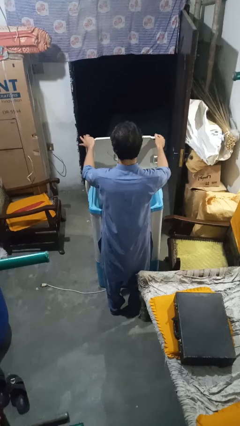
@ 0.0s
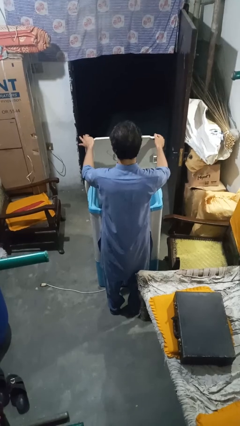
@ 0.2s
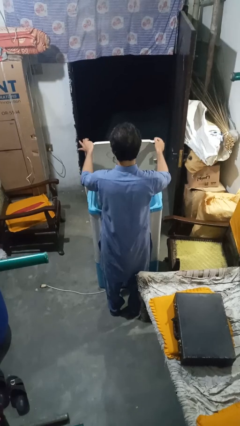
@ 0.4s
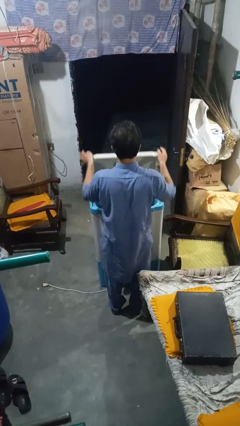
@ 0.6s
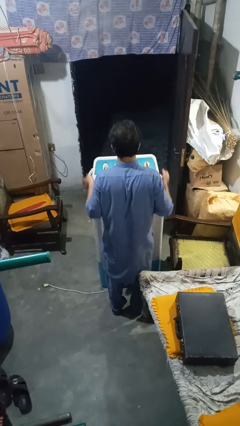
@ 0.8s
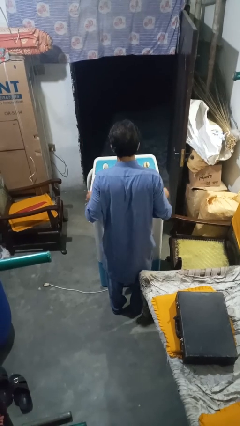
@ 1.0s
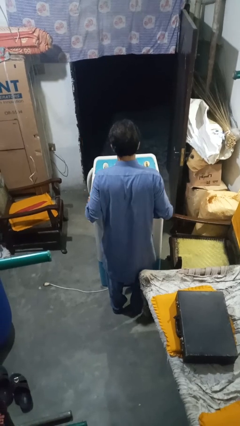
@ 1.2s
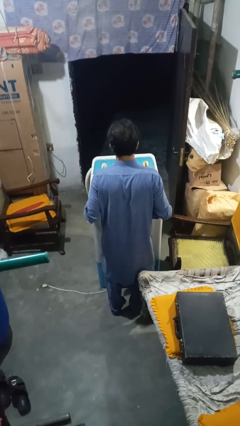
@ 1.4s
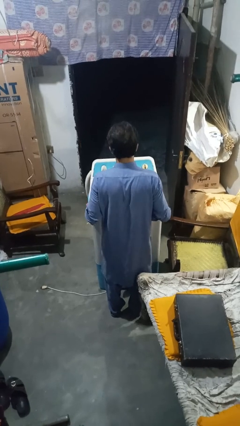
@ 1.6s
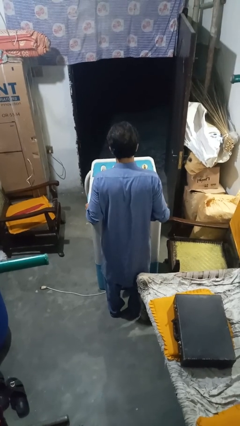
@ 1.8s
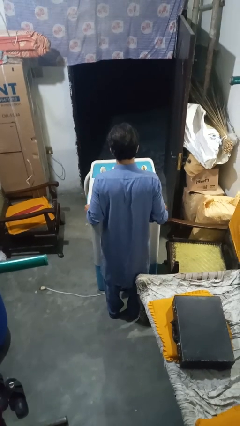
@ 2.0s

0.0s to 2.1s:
person closes clothes washer

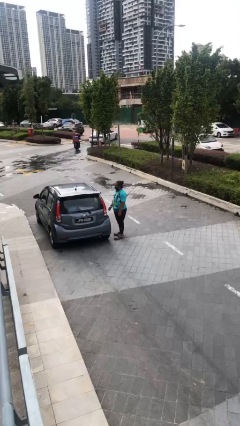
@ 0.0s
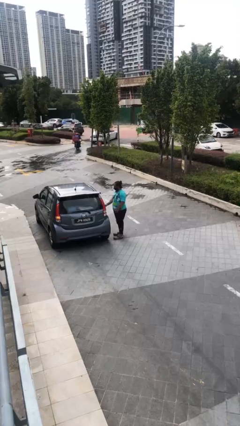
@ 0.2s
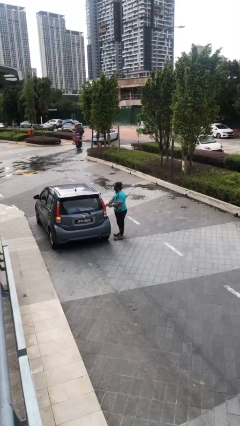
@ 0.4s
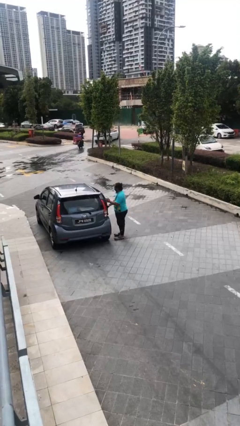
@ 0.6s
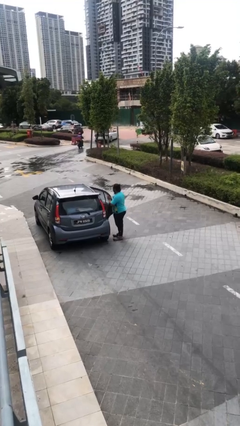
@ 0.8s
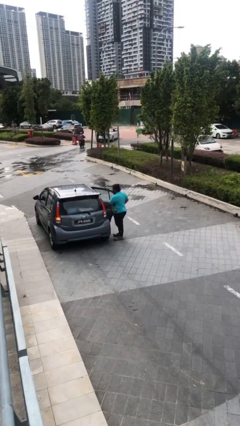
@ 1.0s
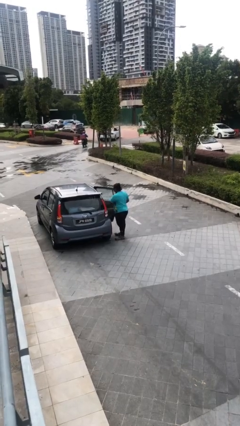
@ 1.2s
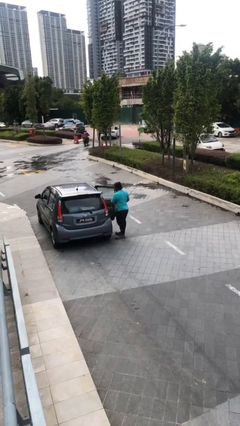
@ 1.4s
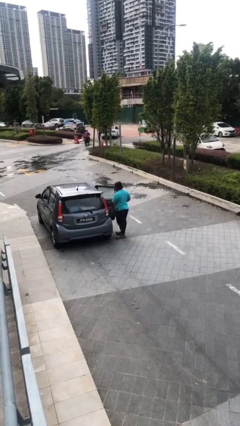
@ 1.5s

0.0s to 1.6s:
person opens car door

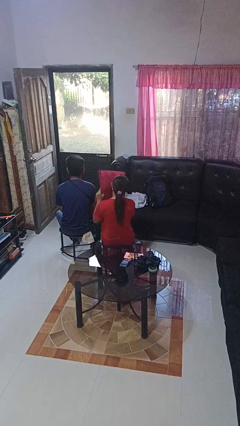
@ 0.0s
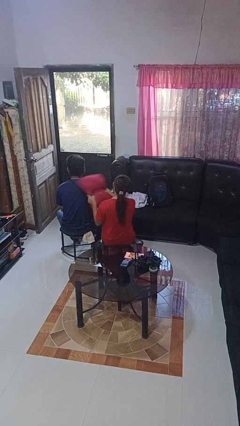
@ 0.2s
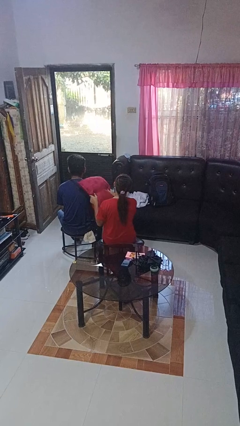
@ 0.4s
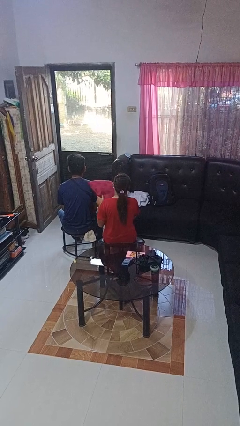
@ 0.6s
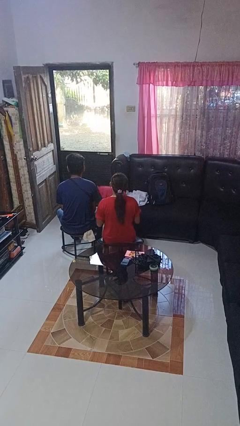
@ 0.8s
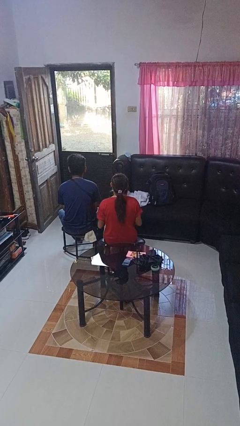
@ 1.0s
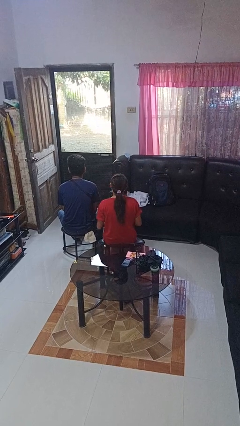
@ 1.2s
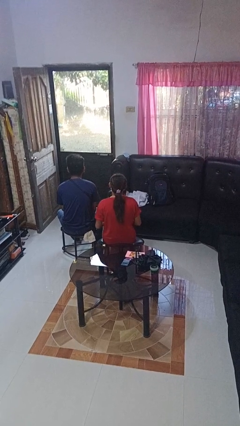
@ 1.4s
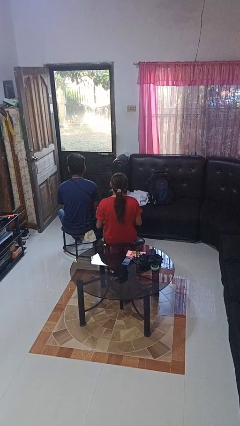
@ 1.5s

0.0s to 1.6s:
person hits person with pillow

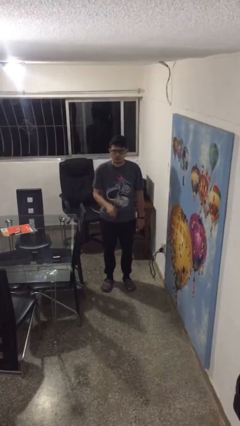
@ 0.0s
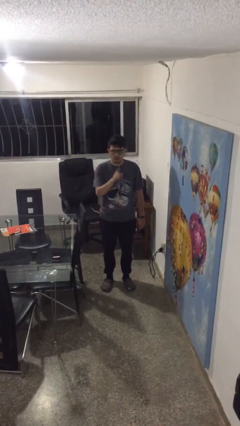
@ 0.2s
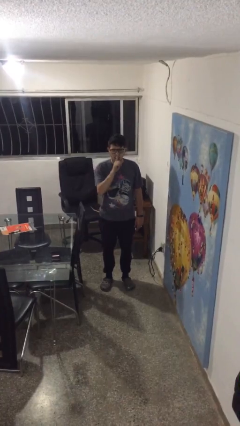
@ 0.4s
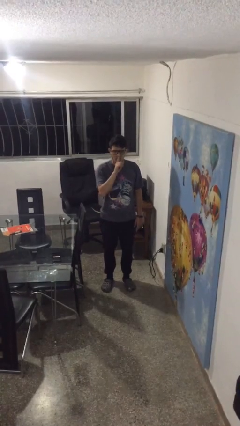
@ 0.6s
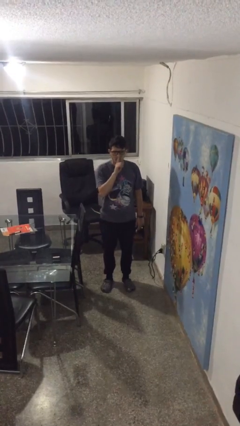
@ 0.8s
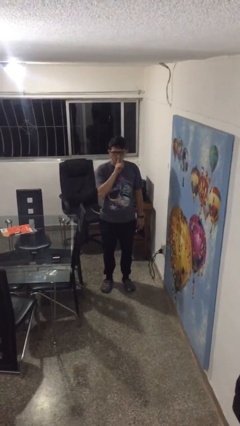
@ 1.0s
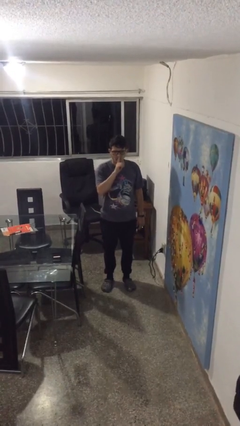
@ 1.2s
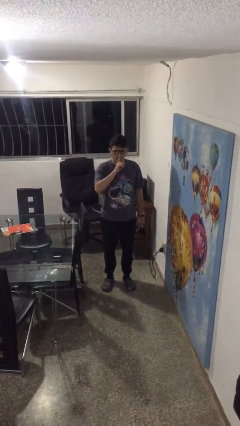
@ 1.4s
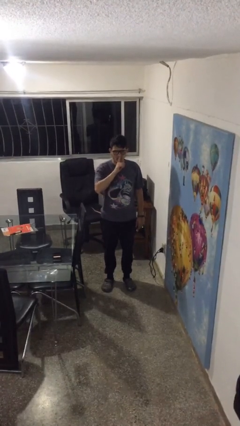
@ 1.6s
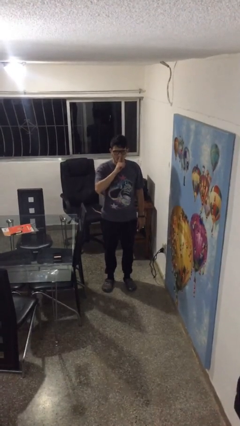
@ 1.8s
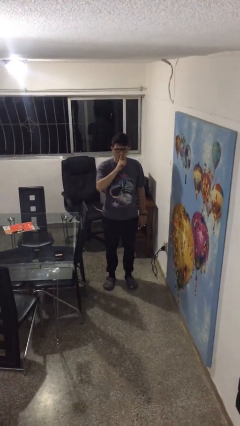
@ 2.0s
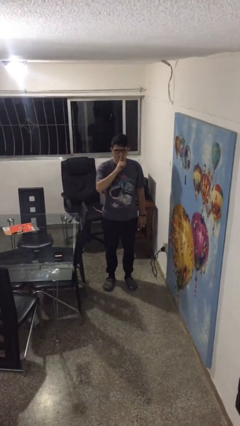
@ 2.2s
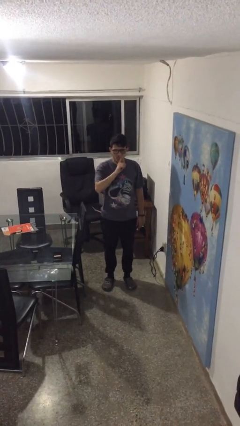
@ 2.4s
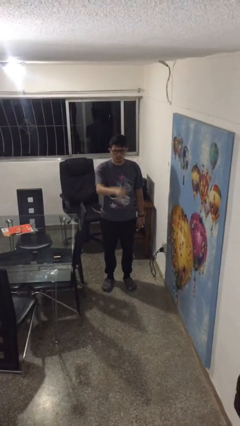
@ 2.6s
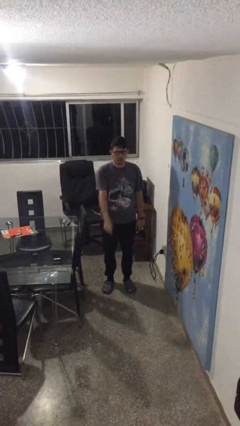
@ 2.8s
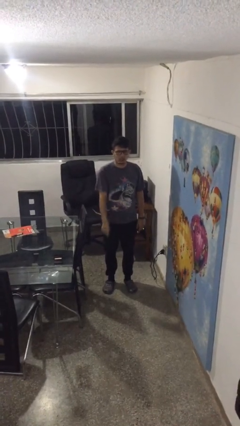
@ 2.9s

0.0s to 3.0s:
person gestures be quiet

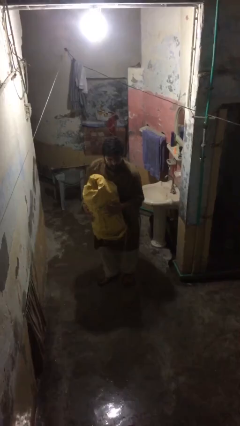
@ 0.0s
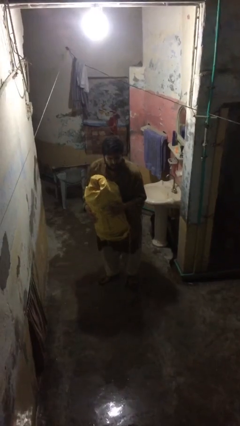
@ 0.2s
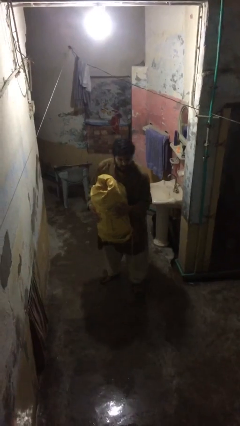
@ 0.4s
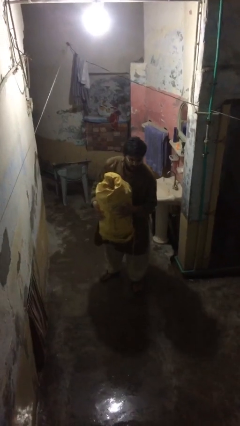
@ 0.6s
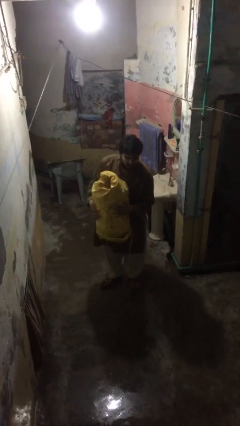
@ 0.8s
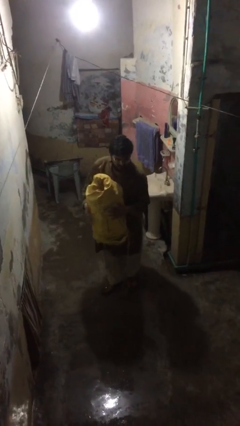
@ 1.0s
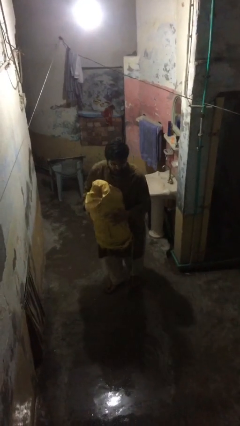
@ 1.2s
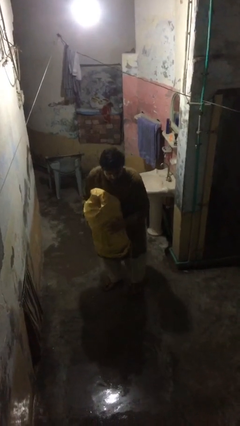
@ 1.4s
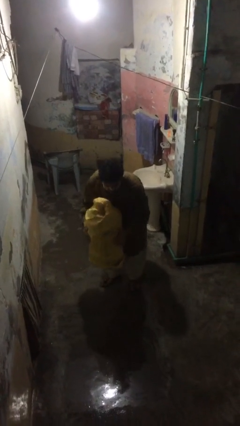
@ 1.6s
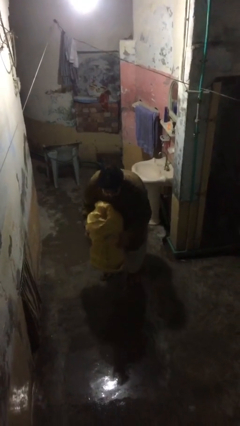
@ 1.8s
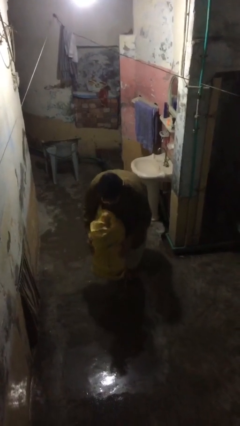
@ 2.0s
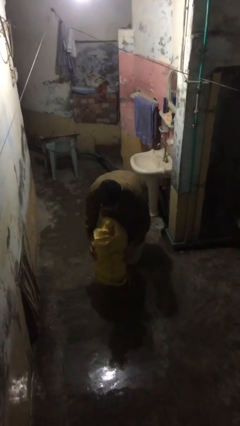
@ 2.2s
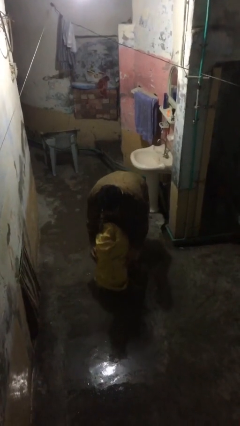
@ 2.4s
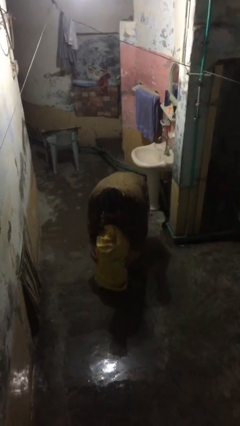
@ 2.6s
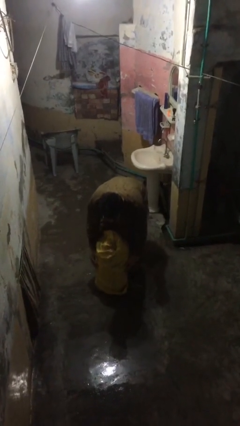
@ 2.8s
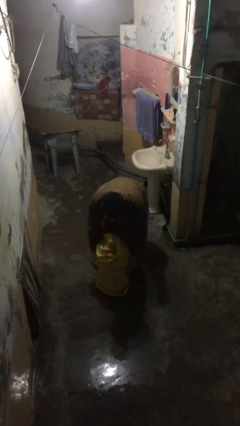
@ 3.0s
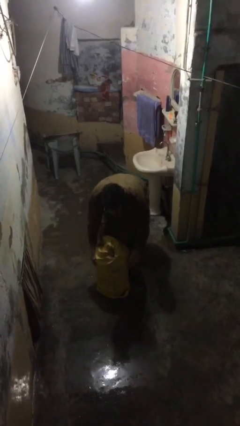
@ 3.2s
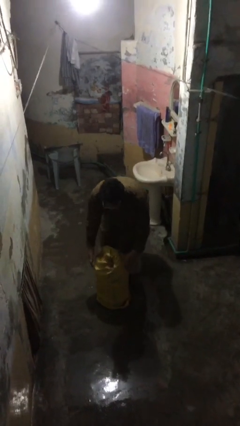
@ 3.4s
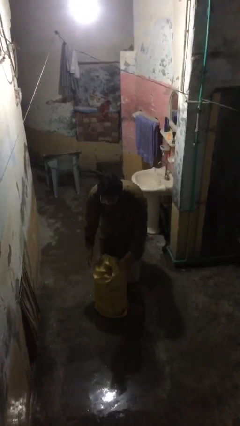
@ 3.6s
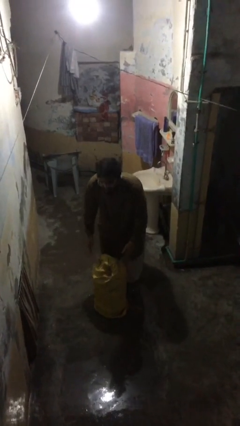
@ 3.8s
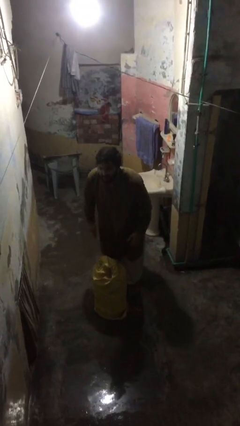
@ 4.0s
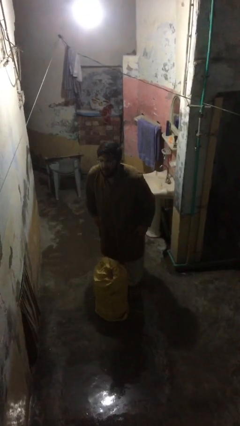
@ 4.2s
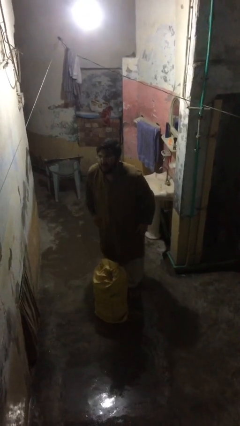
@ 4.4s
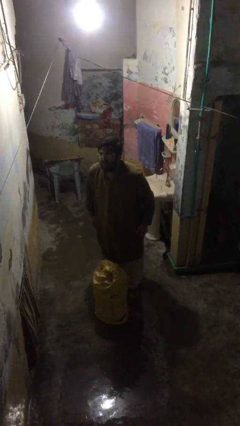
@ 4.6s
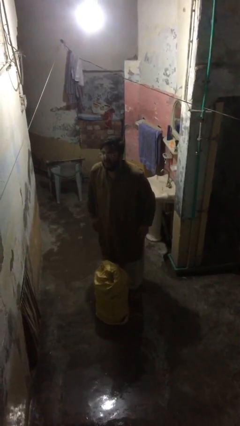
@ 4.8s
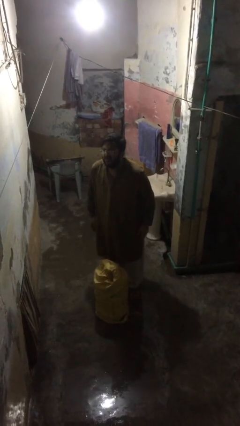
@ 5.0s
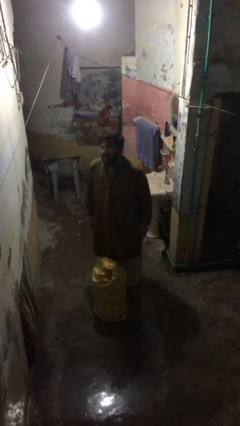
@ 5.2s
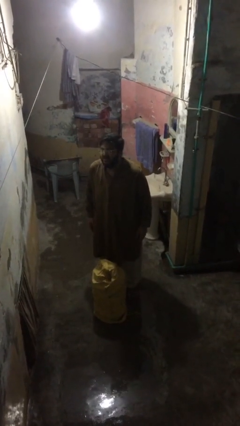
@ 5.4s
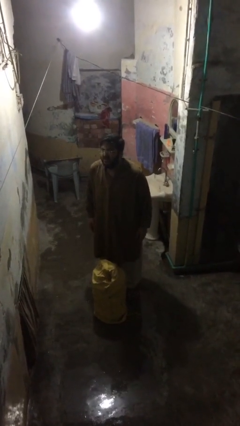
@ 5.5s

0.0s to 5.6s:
person puts down object on floor

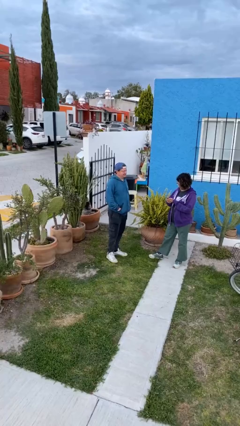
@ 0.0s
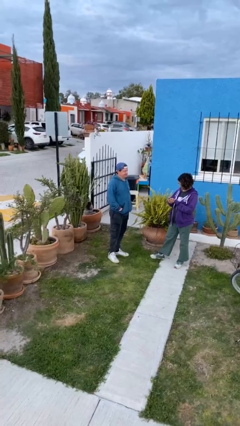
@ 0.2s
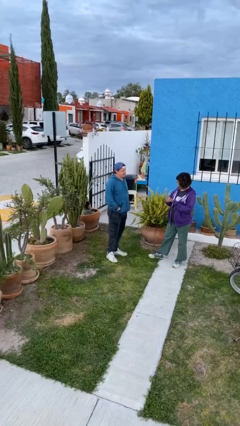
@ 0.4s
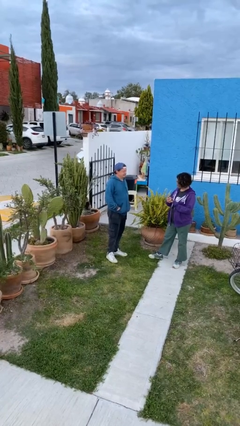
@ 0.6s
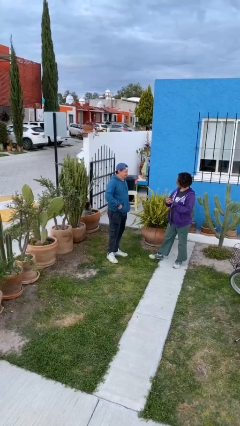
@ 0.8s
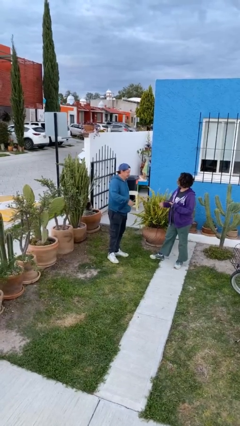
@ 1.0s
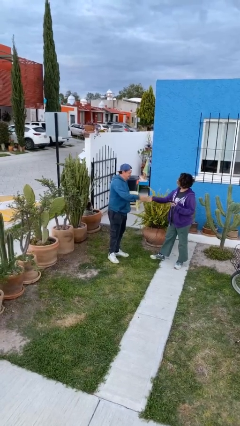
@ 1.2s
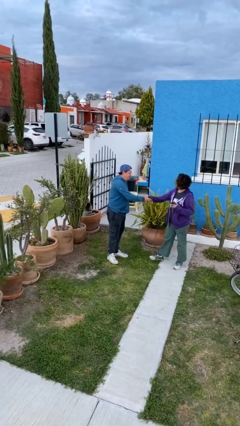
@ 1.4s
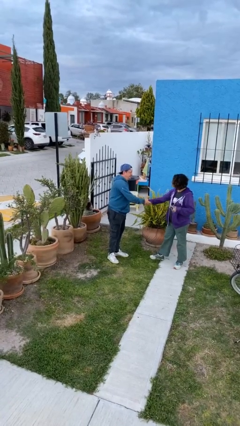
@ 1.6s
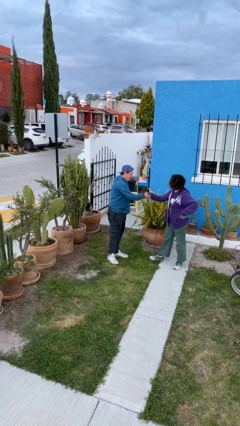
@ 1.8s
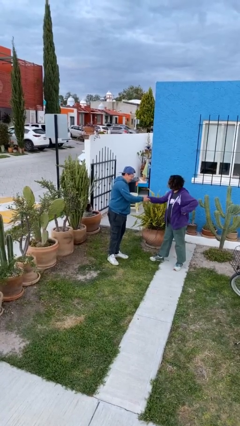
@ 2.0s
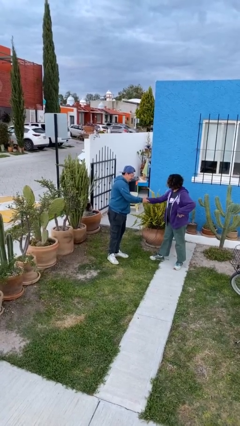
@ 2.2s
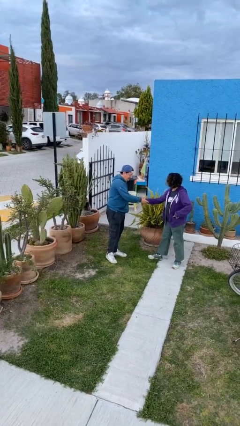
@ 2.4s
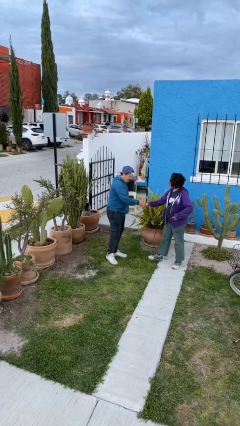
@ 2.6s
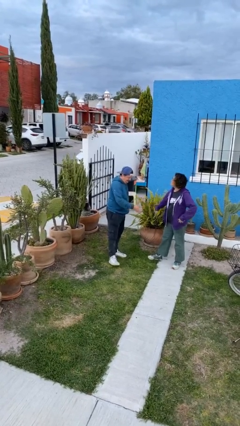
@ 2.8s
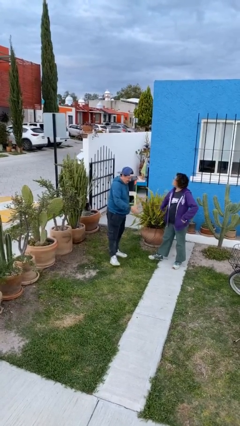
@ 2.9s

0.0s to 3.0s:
person shakes hand

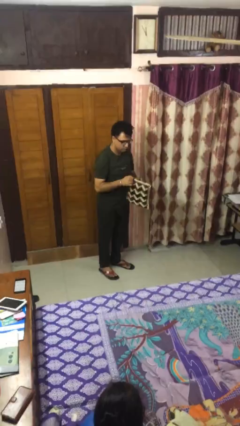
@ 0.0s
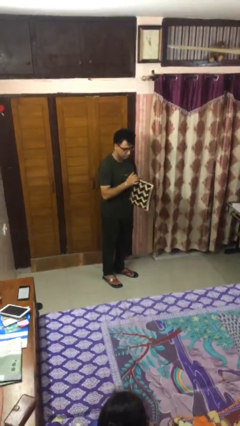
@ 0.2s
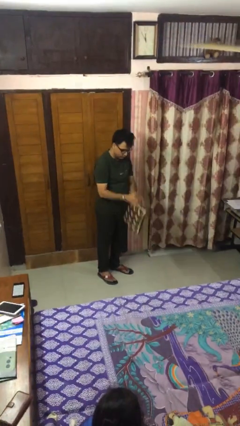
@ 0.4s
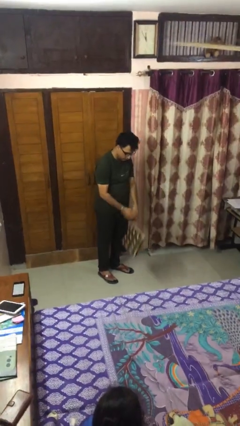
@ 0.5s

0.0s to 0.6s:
person drops object
